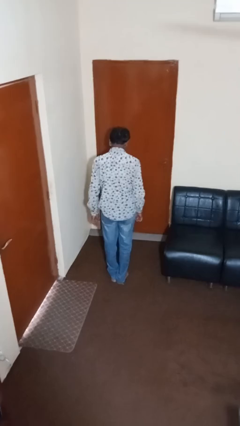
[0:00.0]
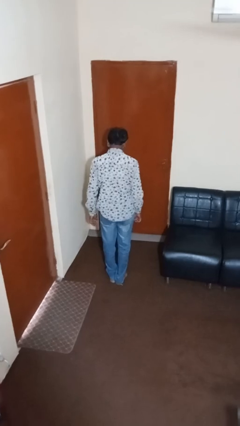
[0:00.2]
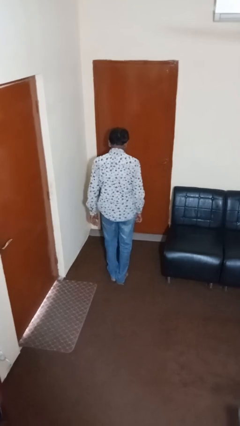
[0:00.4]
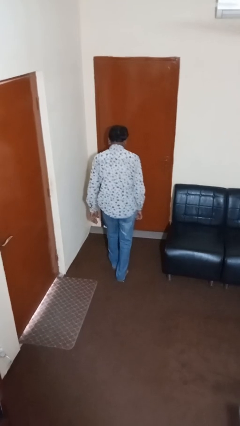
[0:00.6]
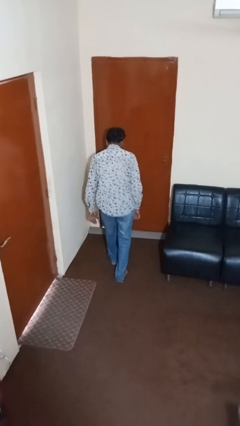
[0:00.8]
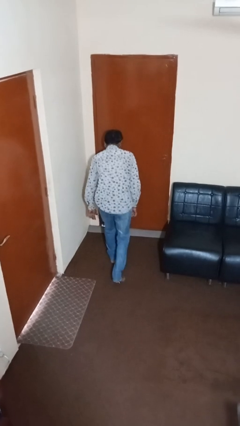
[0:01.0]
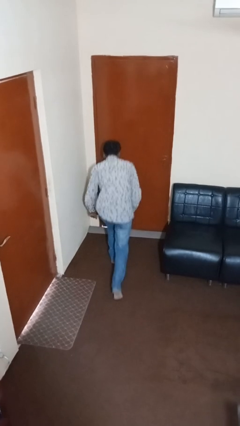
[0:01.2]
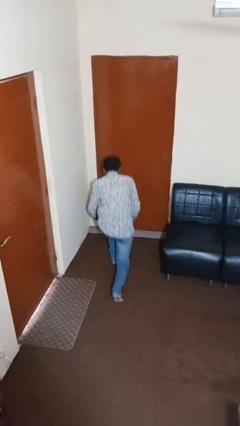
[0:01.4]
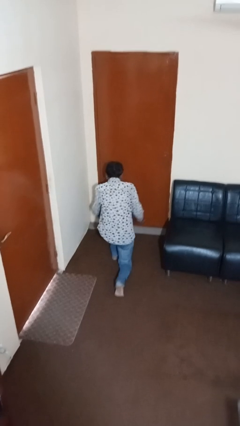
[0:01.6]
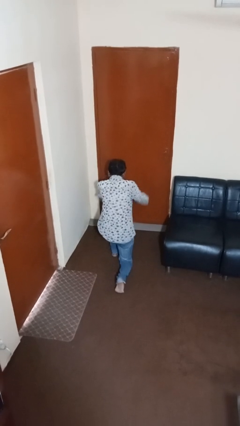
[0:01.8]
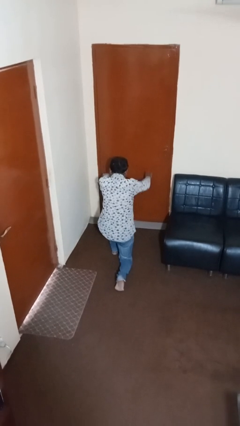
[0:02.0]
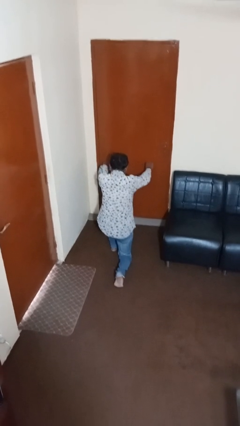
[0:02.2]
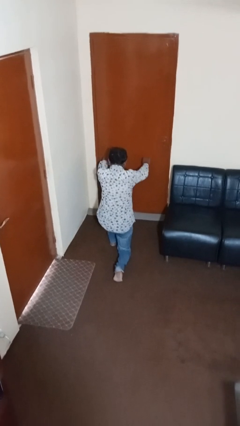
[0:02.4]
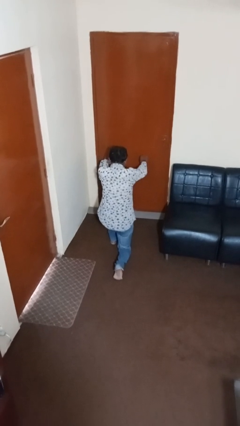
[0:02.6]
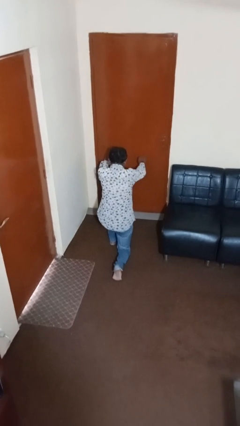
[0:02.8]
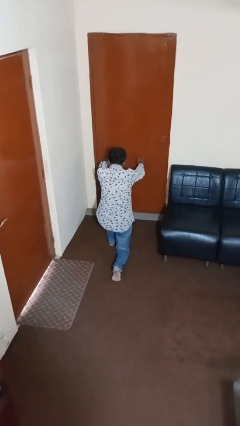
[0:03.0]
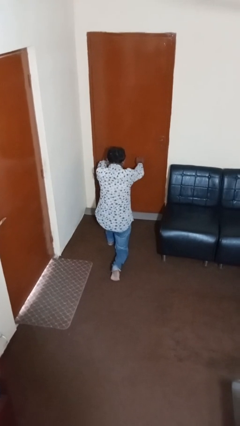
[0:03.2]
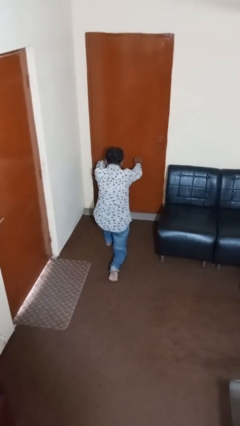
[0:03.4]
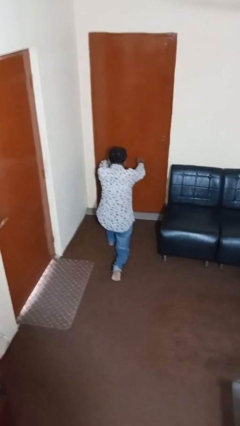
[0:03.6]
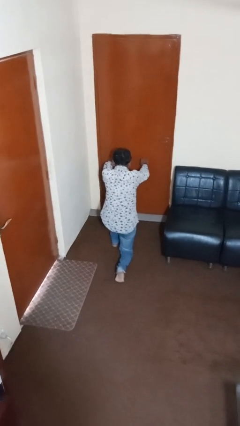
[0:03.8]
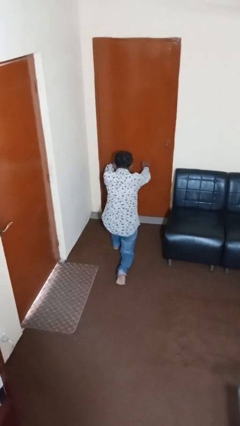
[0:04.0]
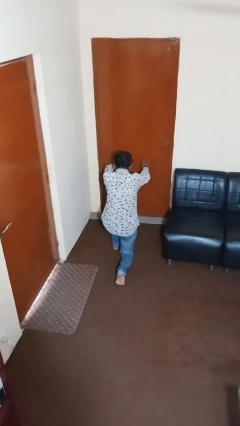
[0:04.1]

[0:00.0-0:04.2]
person exercises with lunges

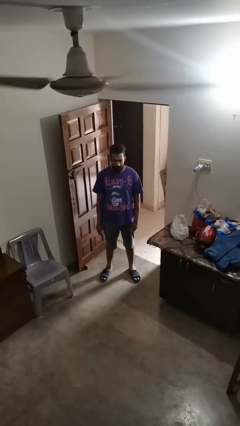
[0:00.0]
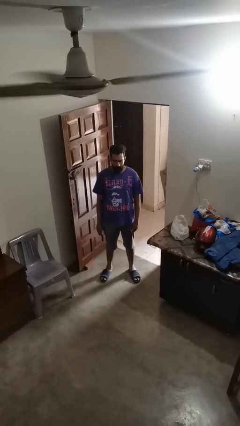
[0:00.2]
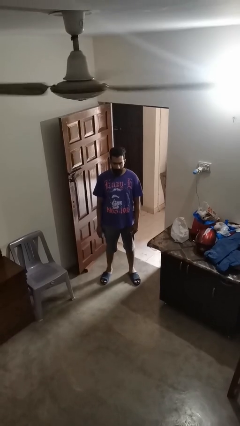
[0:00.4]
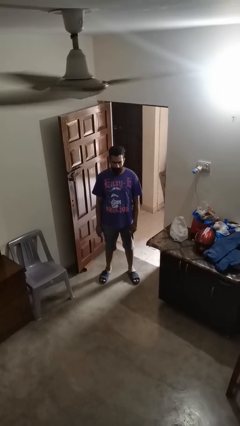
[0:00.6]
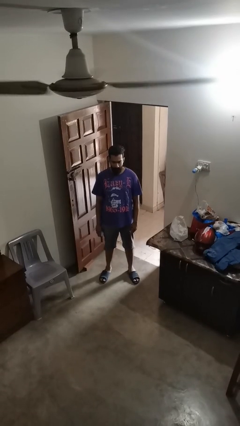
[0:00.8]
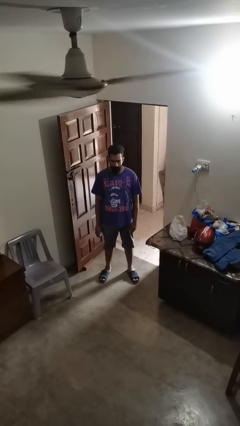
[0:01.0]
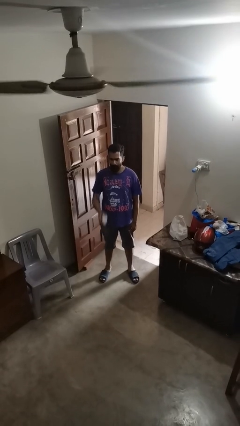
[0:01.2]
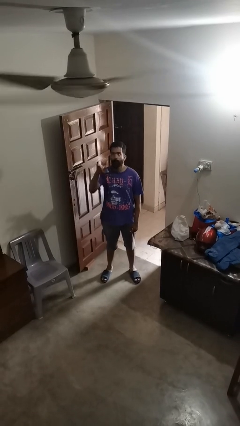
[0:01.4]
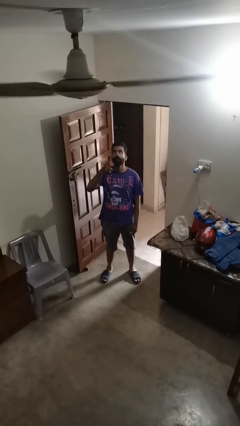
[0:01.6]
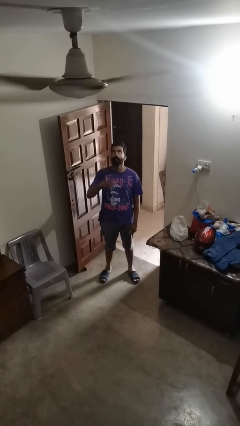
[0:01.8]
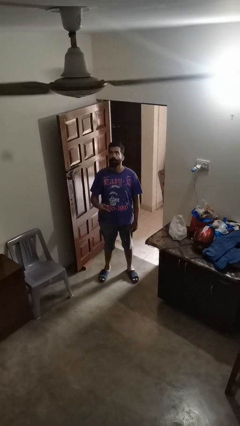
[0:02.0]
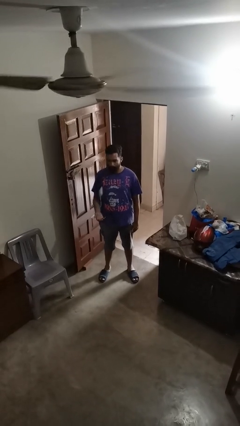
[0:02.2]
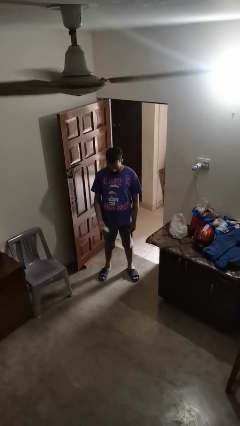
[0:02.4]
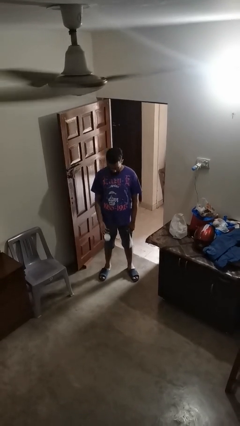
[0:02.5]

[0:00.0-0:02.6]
person drops object

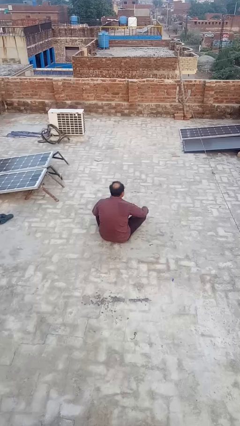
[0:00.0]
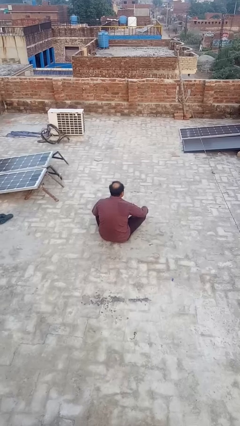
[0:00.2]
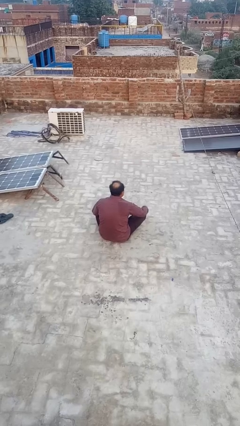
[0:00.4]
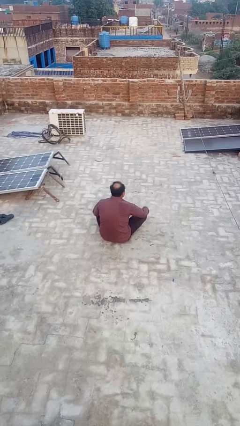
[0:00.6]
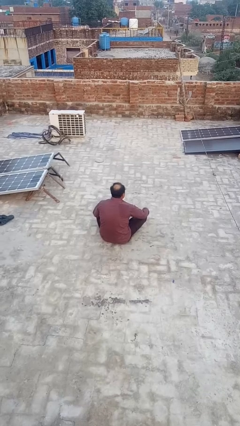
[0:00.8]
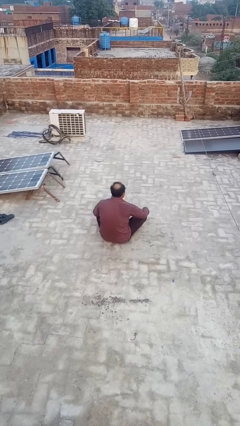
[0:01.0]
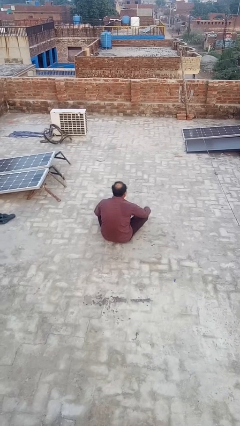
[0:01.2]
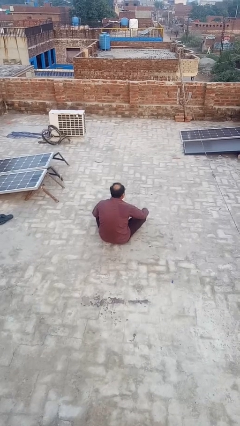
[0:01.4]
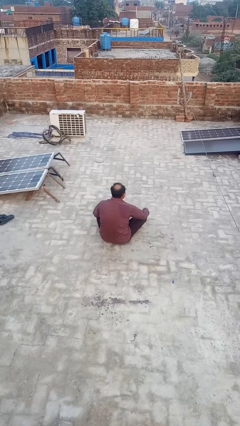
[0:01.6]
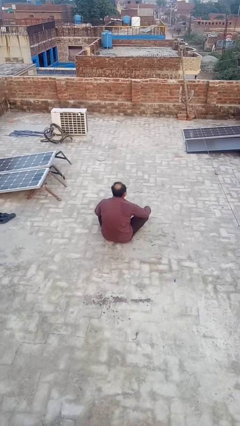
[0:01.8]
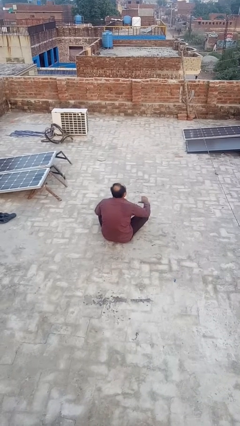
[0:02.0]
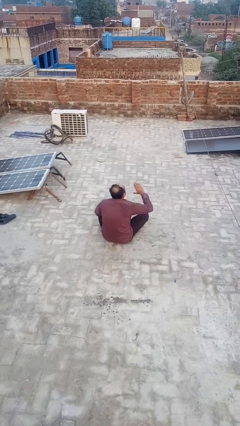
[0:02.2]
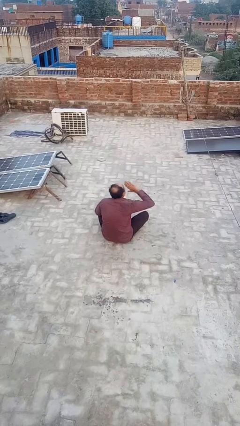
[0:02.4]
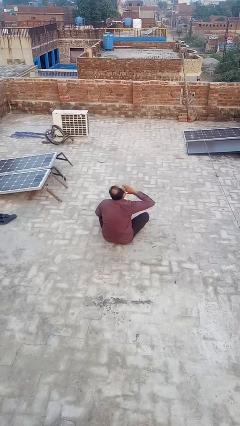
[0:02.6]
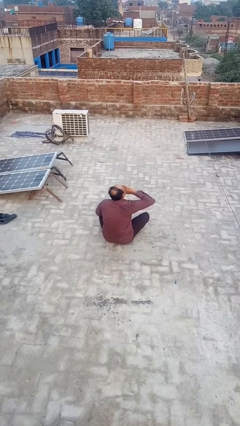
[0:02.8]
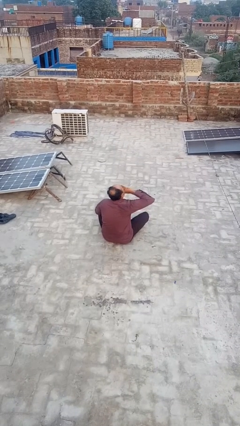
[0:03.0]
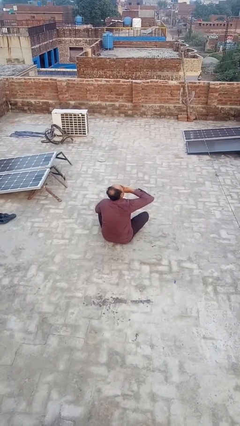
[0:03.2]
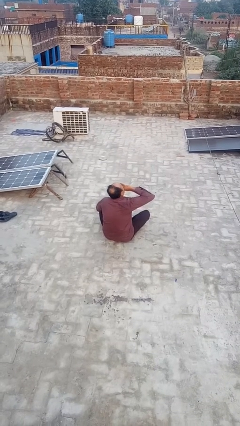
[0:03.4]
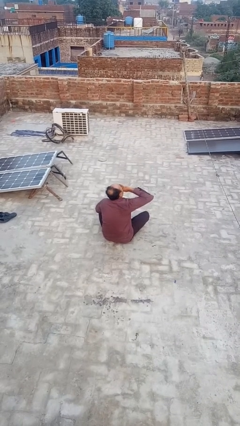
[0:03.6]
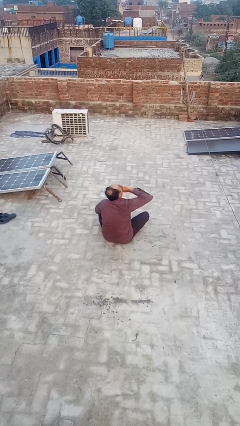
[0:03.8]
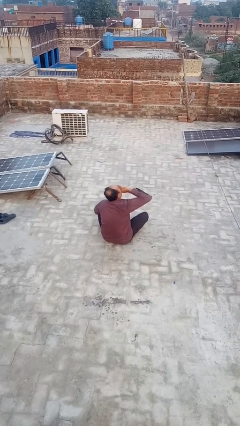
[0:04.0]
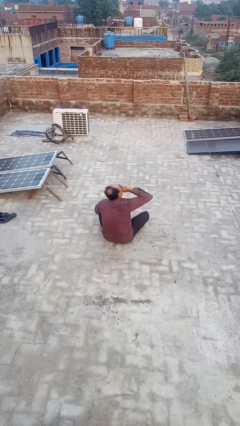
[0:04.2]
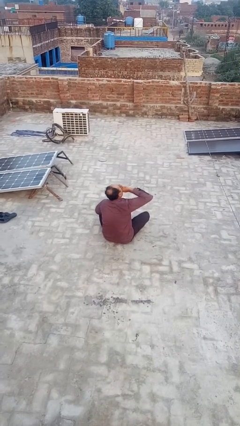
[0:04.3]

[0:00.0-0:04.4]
person yawns

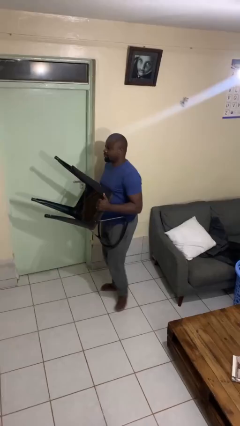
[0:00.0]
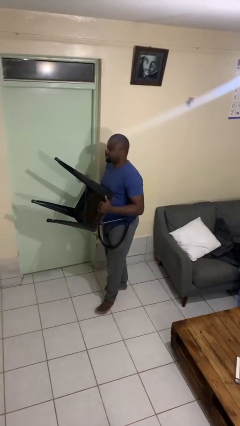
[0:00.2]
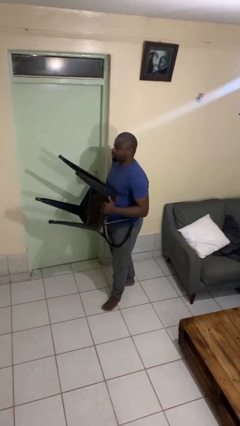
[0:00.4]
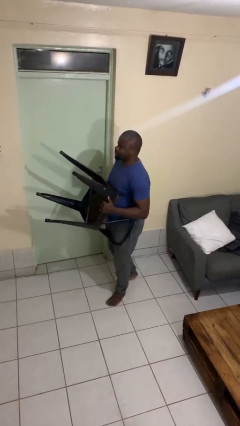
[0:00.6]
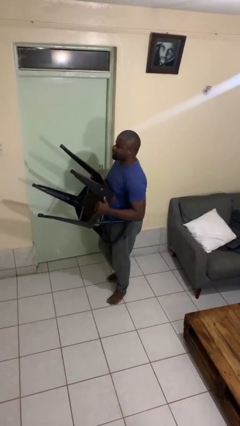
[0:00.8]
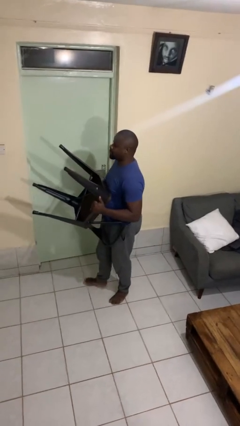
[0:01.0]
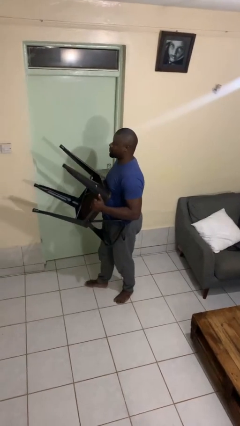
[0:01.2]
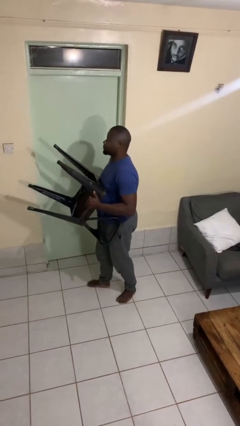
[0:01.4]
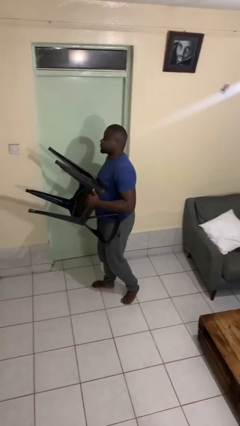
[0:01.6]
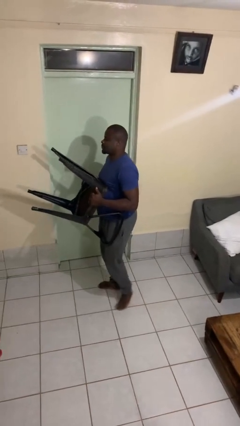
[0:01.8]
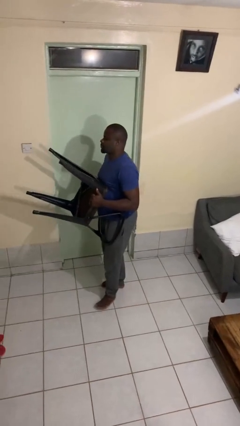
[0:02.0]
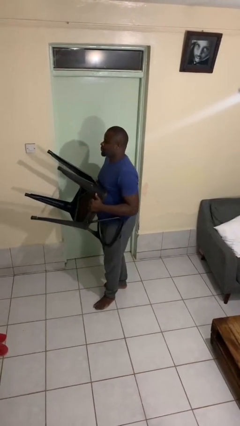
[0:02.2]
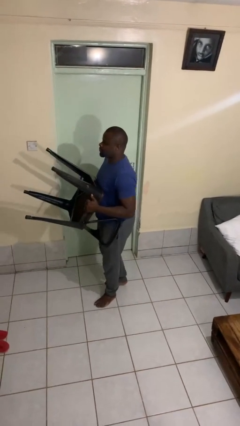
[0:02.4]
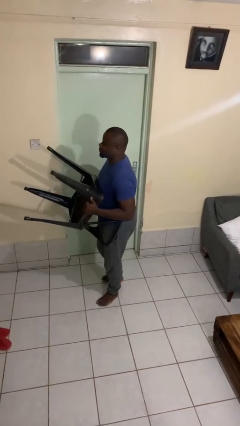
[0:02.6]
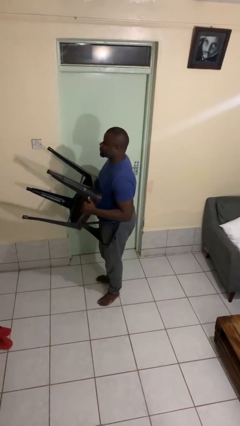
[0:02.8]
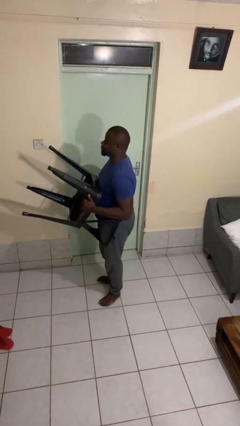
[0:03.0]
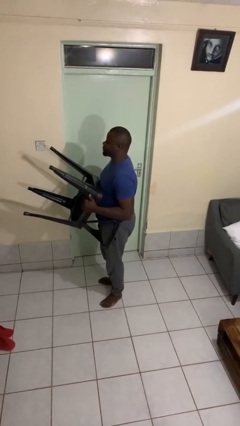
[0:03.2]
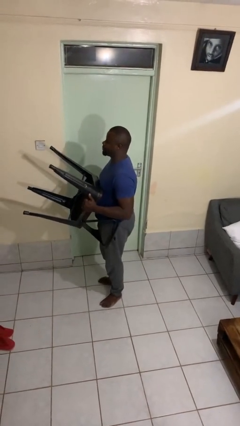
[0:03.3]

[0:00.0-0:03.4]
person carries furniture

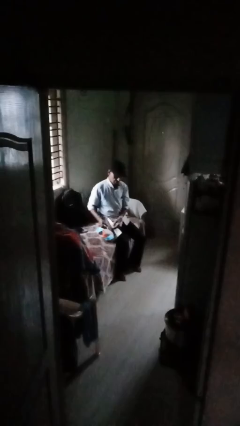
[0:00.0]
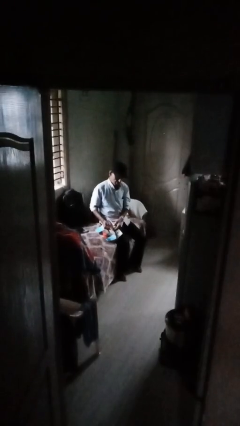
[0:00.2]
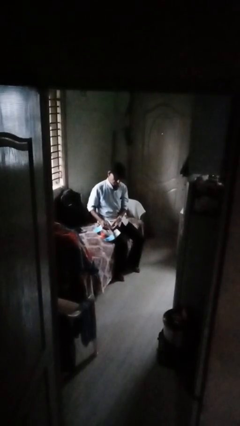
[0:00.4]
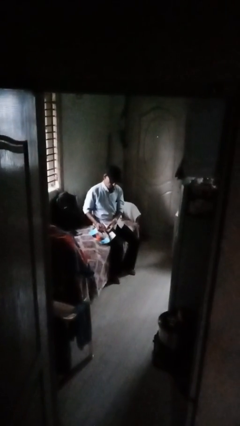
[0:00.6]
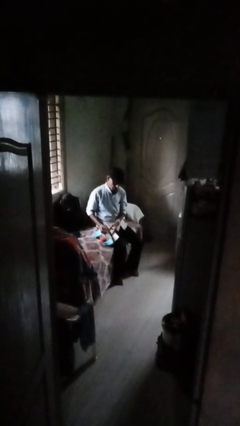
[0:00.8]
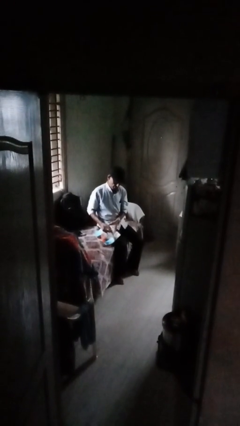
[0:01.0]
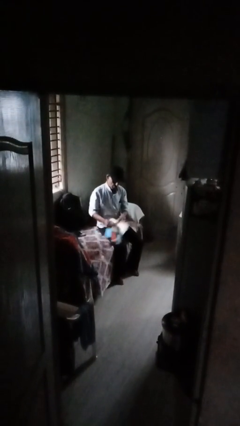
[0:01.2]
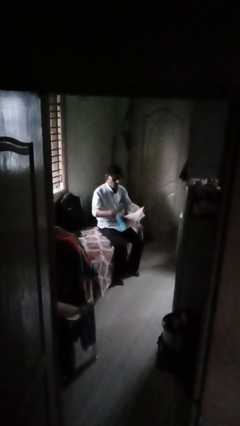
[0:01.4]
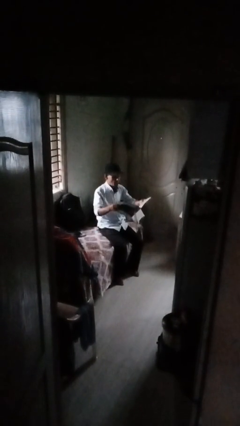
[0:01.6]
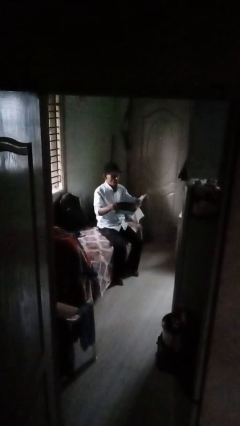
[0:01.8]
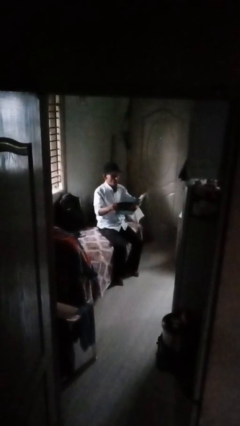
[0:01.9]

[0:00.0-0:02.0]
person reads magazine

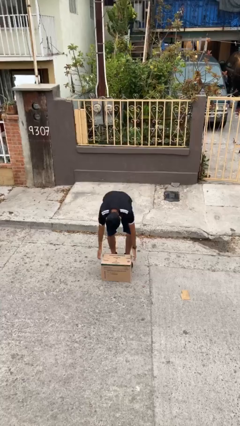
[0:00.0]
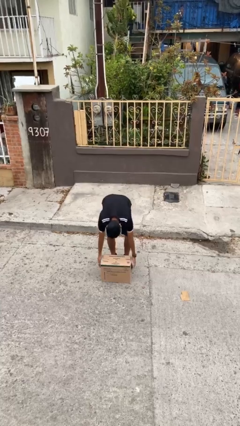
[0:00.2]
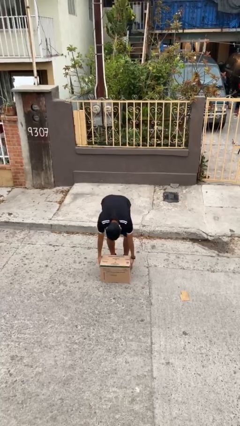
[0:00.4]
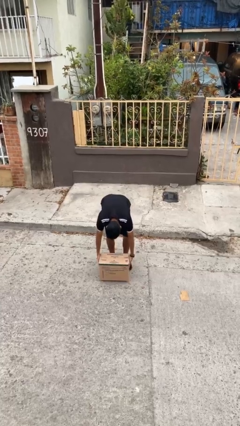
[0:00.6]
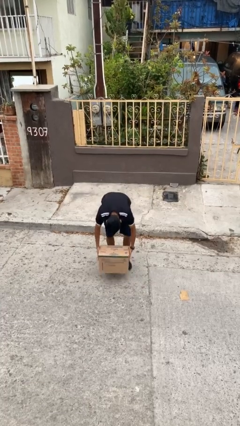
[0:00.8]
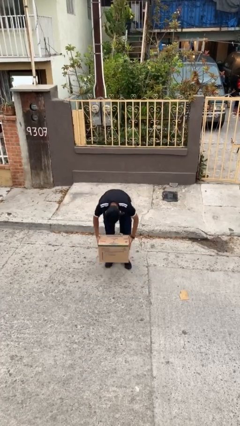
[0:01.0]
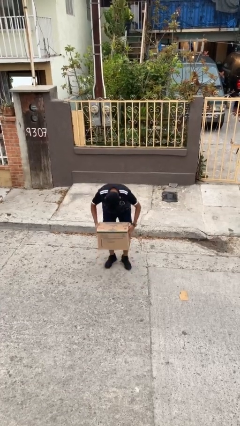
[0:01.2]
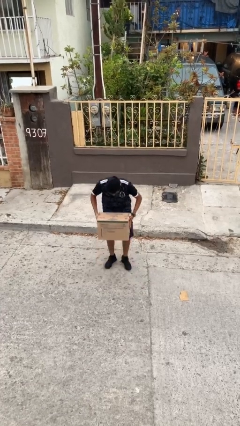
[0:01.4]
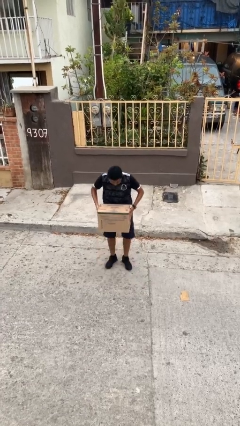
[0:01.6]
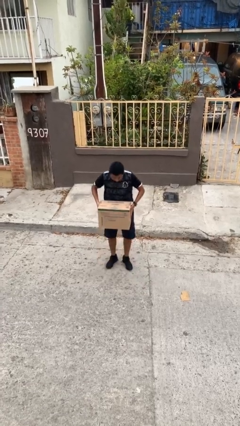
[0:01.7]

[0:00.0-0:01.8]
person picks up object from floor
